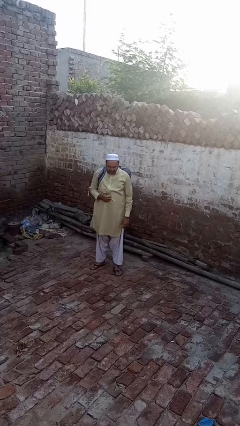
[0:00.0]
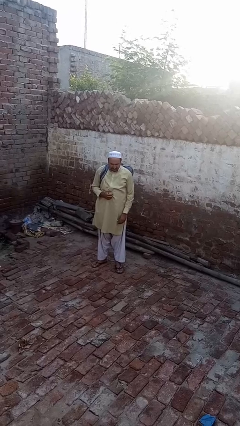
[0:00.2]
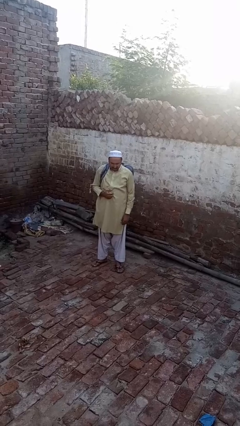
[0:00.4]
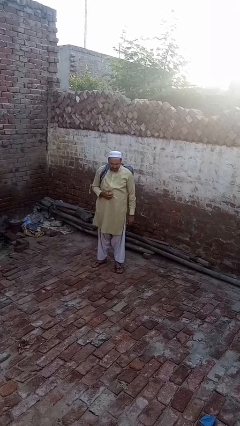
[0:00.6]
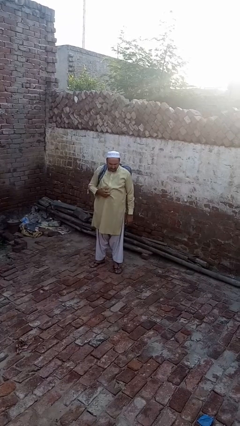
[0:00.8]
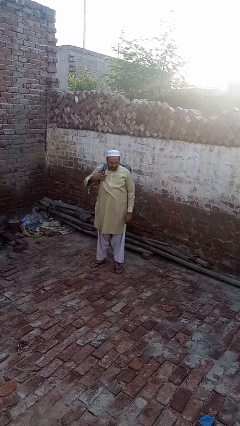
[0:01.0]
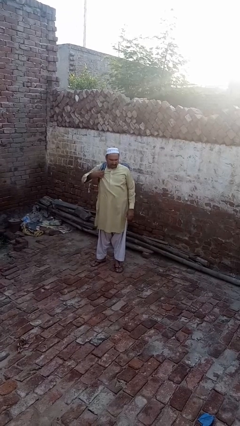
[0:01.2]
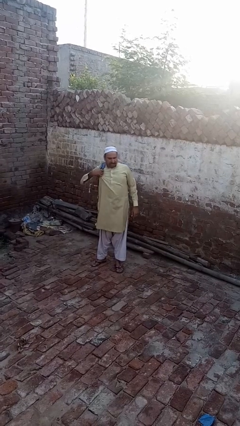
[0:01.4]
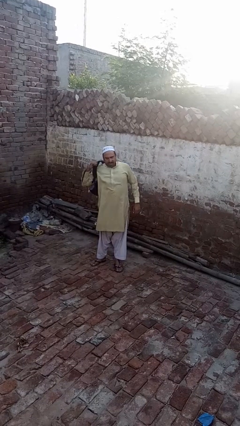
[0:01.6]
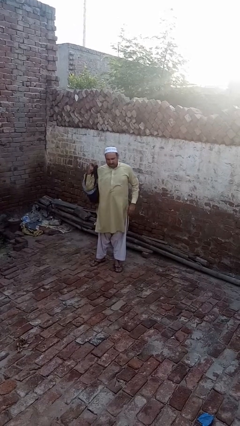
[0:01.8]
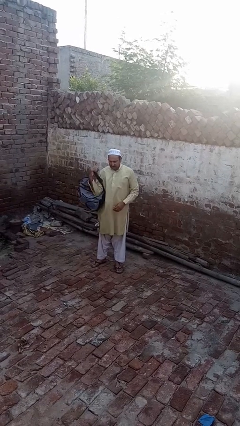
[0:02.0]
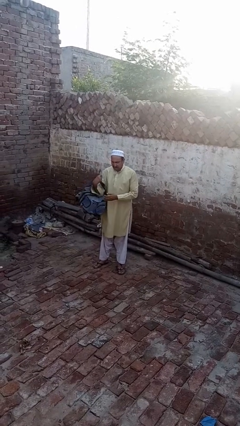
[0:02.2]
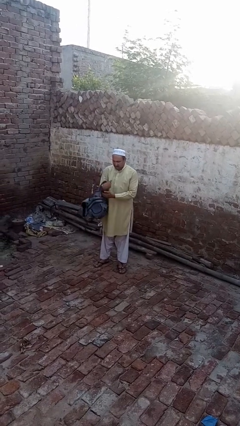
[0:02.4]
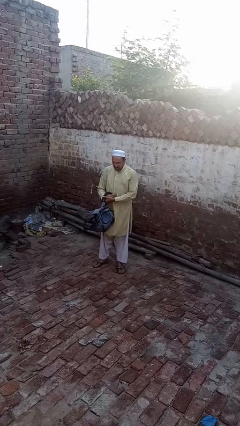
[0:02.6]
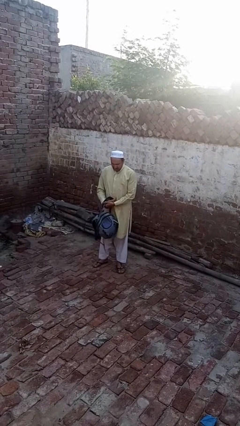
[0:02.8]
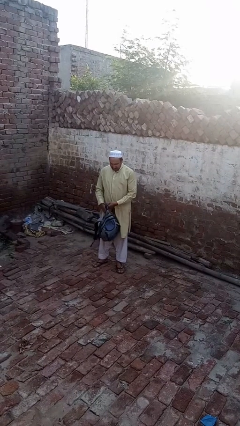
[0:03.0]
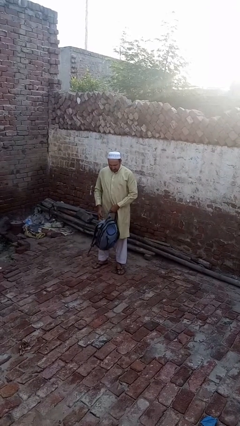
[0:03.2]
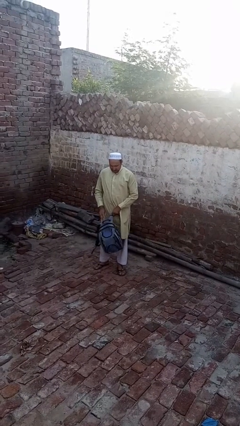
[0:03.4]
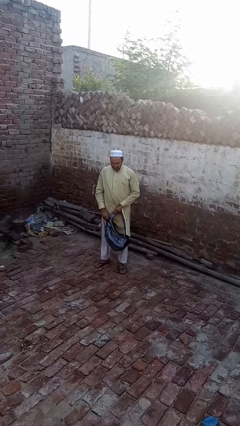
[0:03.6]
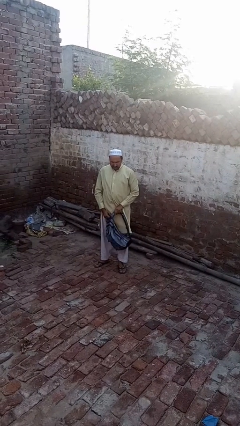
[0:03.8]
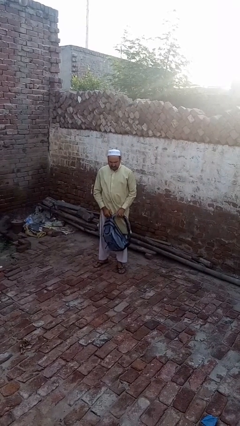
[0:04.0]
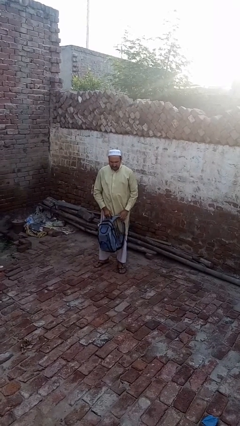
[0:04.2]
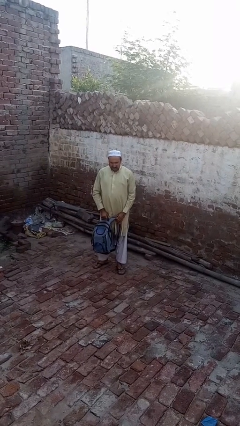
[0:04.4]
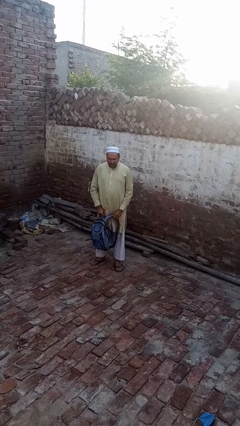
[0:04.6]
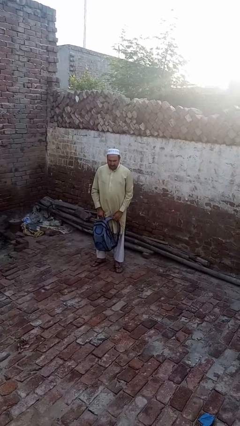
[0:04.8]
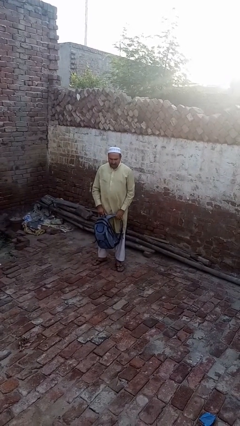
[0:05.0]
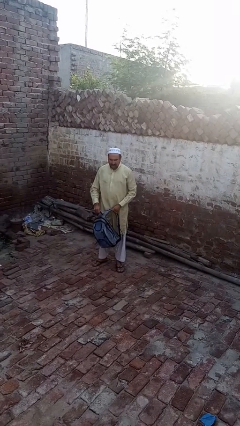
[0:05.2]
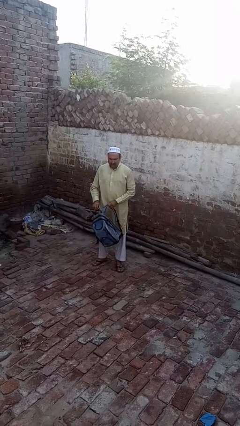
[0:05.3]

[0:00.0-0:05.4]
person takes off backpack

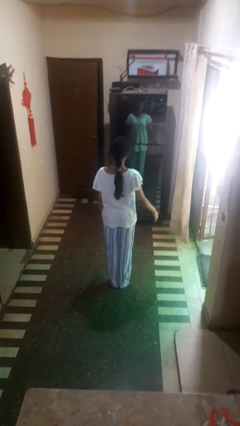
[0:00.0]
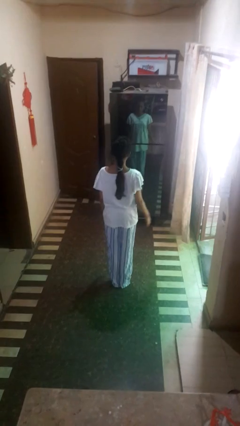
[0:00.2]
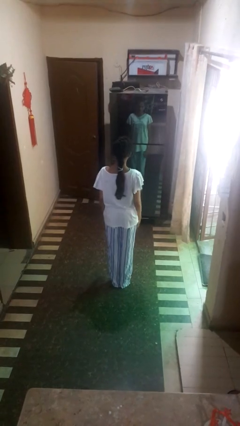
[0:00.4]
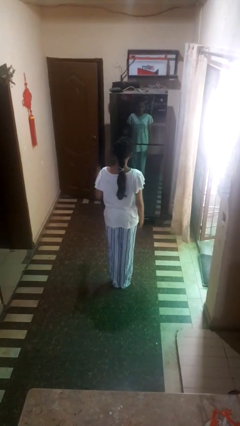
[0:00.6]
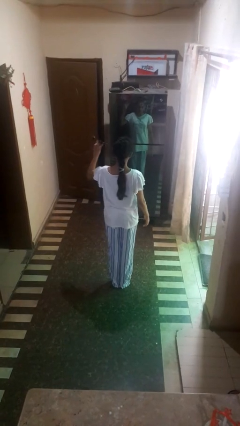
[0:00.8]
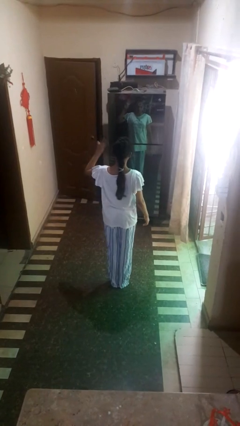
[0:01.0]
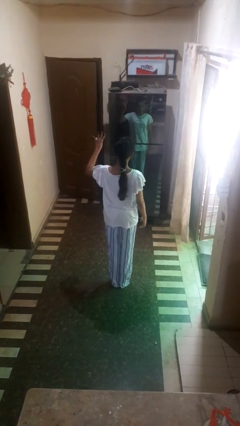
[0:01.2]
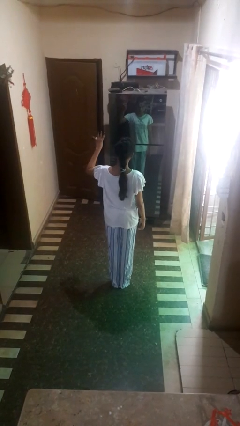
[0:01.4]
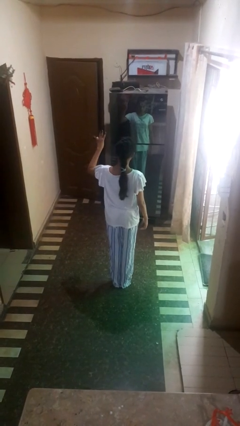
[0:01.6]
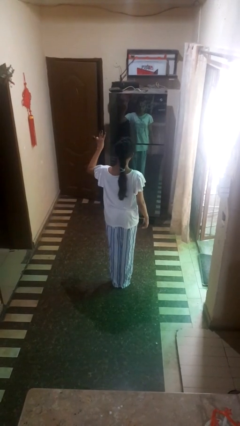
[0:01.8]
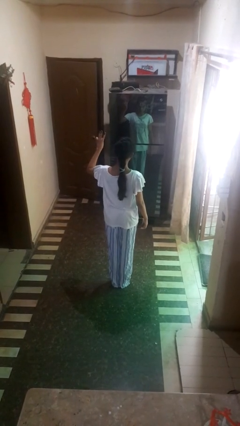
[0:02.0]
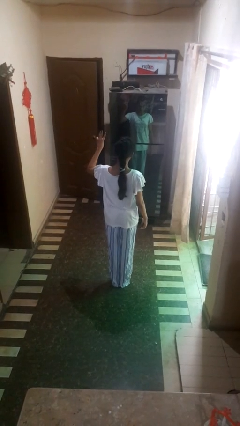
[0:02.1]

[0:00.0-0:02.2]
person gestures number three

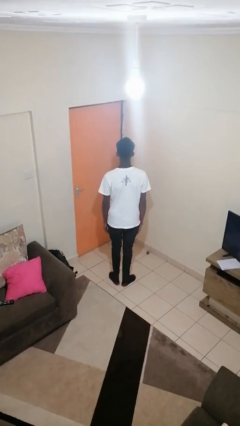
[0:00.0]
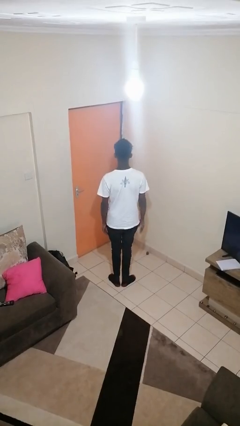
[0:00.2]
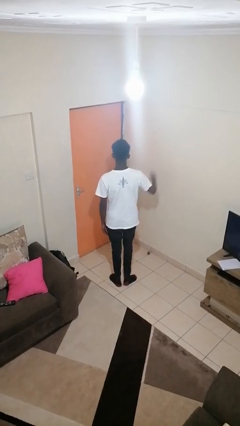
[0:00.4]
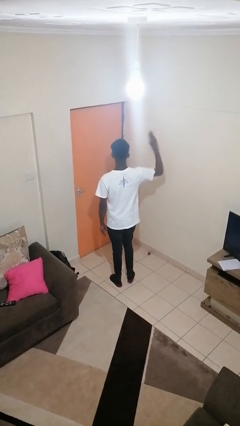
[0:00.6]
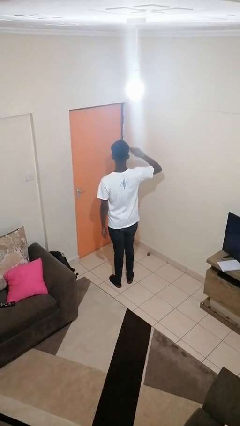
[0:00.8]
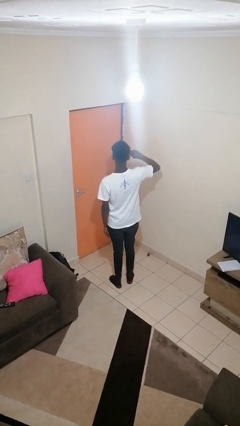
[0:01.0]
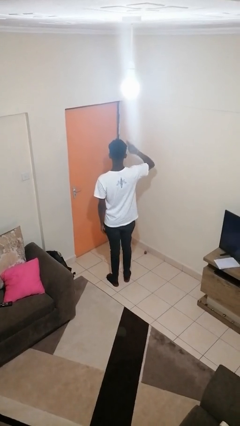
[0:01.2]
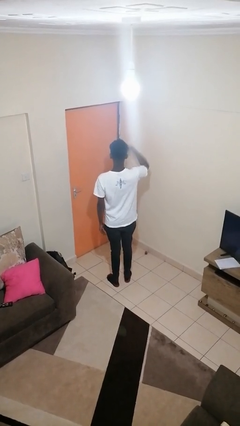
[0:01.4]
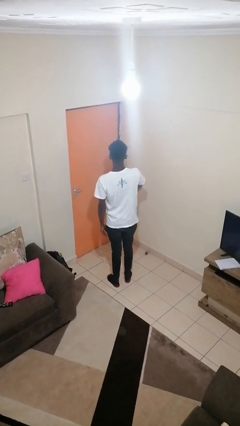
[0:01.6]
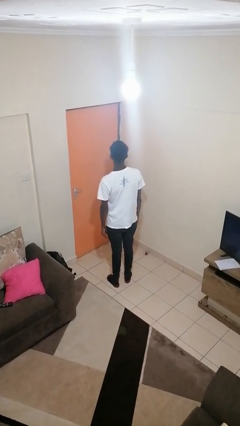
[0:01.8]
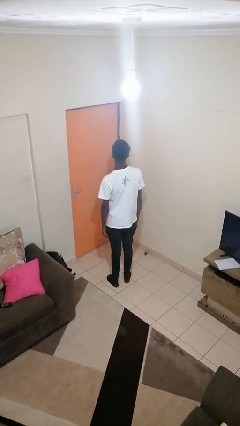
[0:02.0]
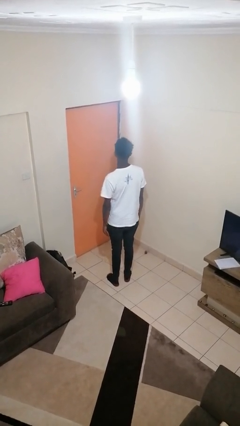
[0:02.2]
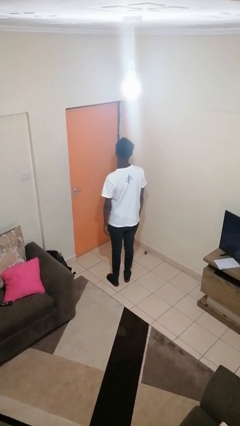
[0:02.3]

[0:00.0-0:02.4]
person salutes

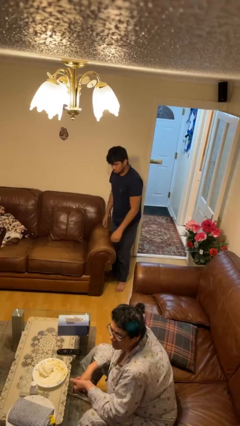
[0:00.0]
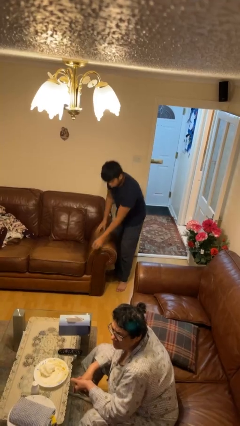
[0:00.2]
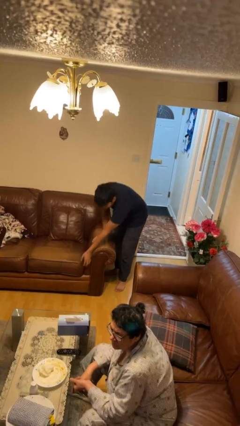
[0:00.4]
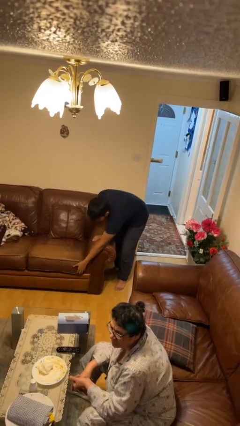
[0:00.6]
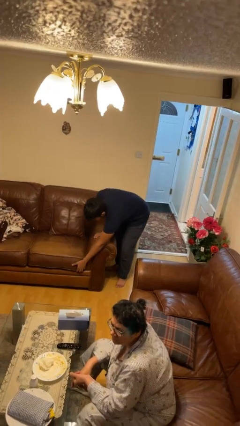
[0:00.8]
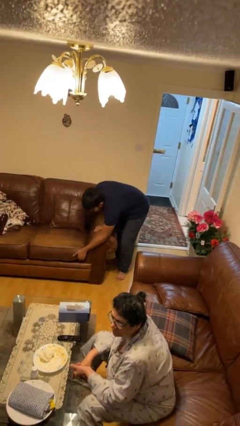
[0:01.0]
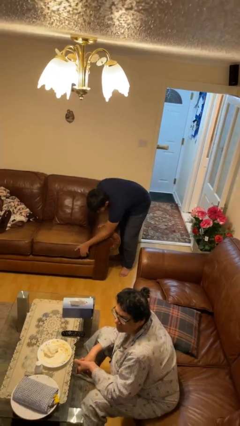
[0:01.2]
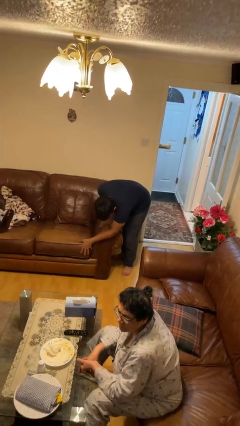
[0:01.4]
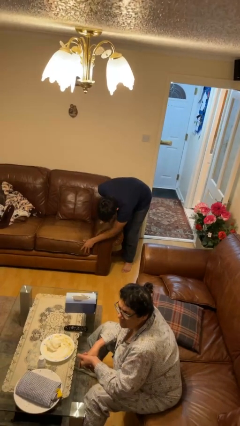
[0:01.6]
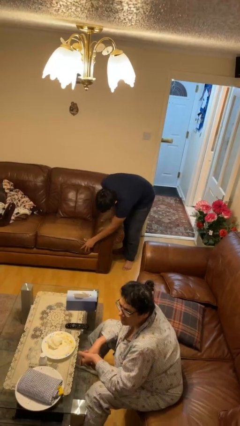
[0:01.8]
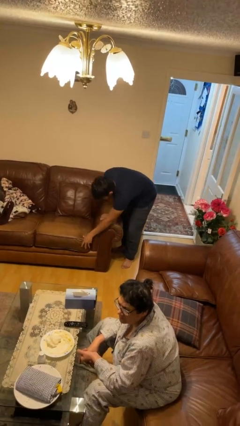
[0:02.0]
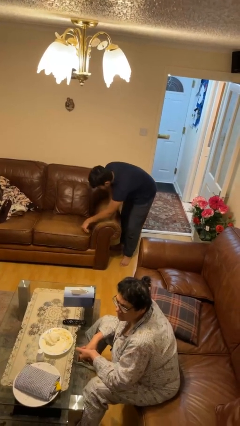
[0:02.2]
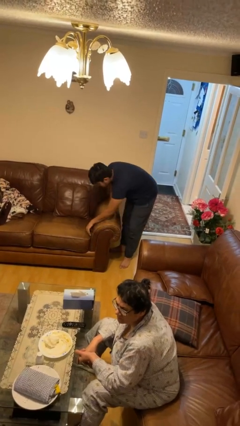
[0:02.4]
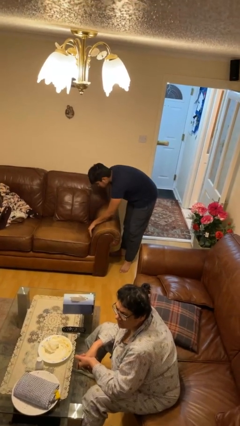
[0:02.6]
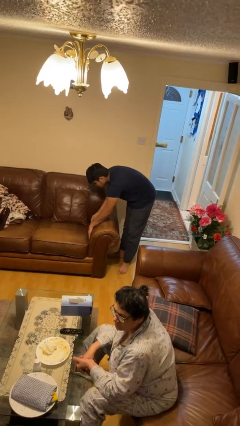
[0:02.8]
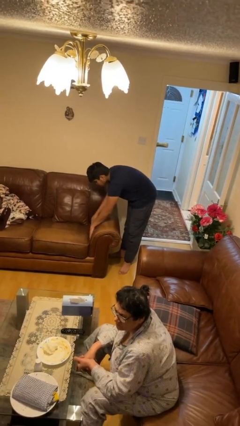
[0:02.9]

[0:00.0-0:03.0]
person searches in couch

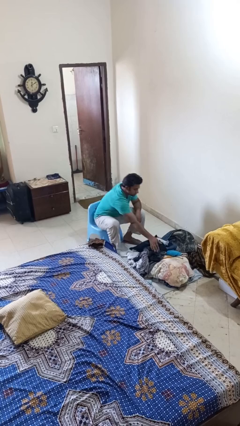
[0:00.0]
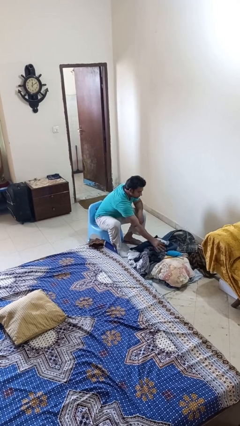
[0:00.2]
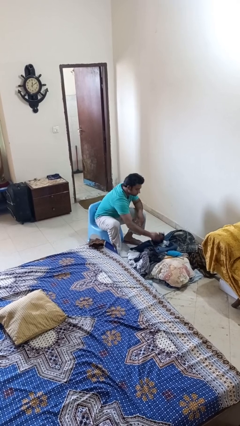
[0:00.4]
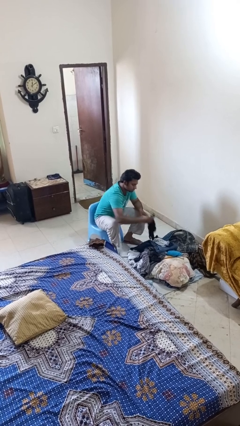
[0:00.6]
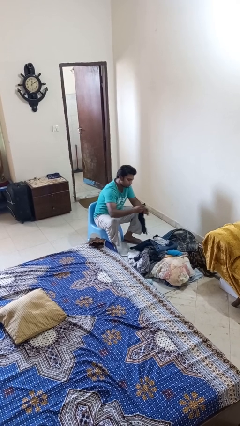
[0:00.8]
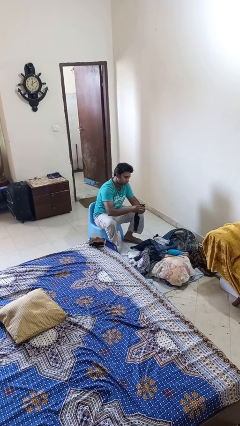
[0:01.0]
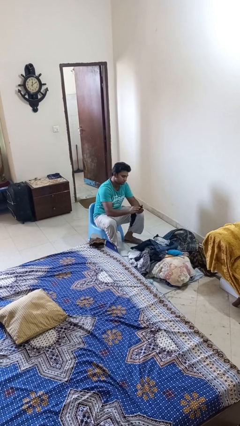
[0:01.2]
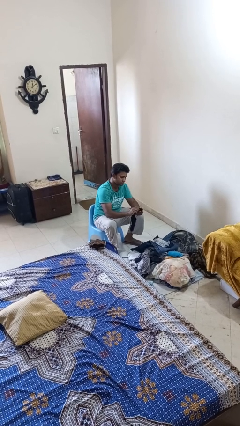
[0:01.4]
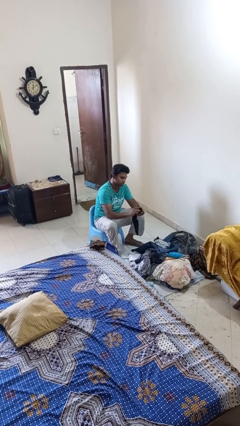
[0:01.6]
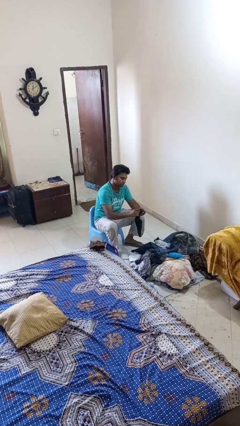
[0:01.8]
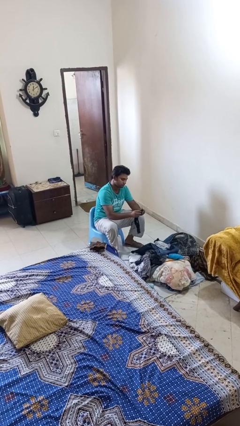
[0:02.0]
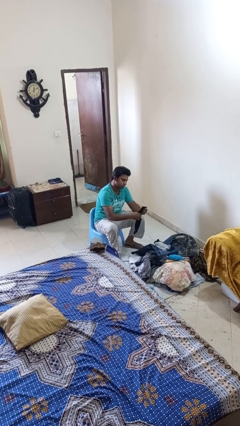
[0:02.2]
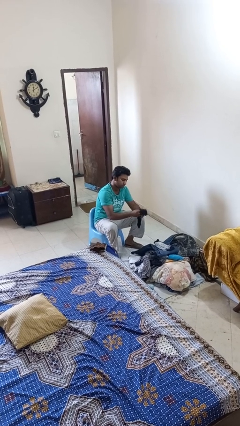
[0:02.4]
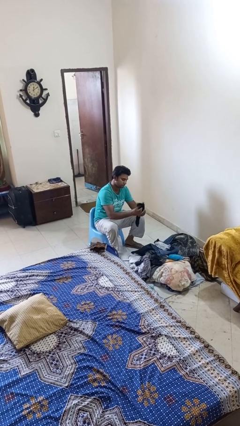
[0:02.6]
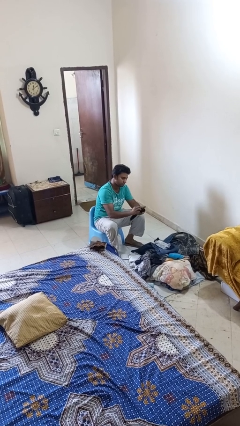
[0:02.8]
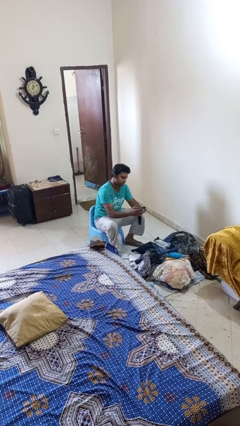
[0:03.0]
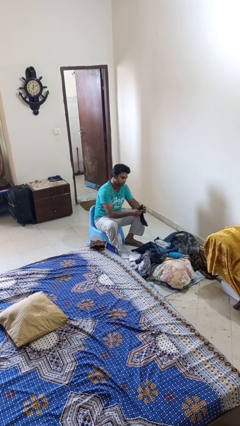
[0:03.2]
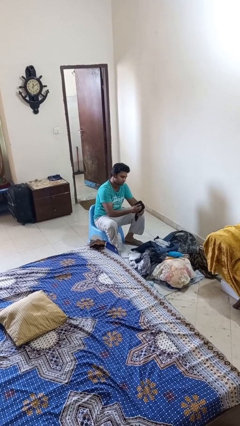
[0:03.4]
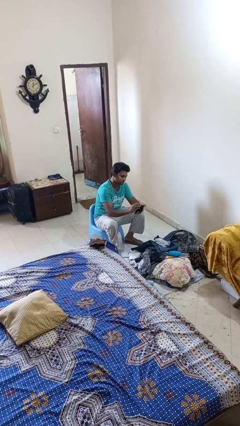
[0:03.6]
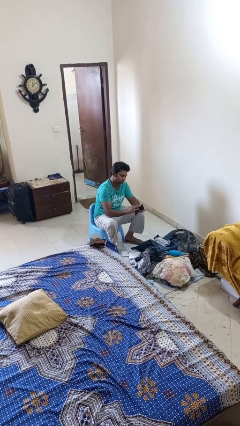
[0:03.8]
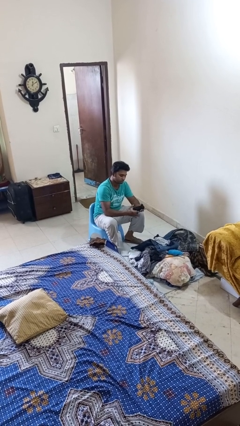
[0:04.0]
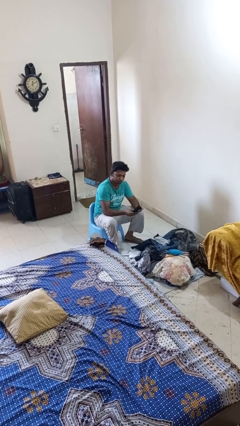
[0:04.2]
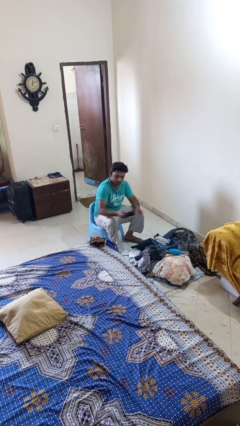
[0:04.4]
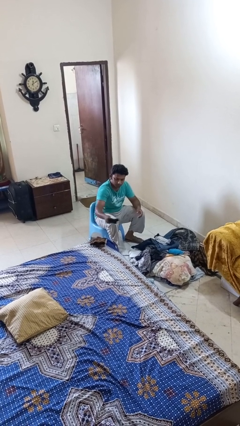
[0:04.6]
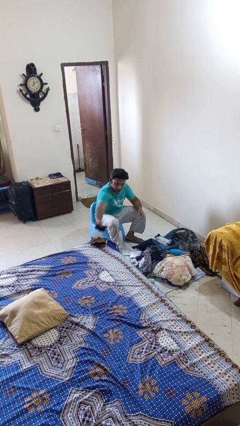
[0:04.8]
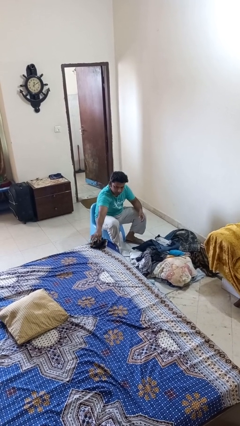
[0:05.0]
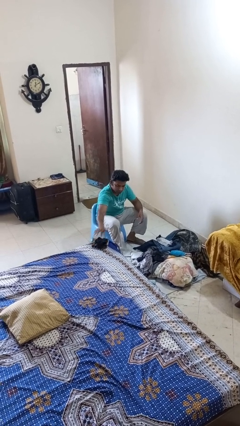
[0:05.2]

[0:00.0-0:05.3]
person folds socks
